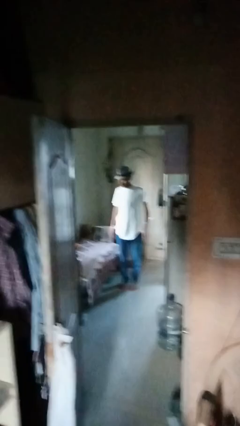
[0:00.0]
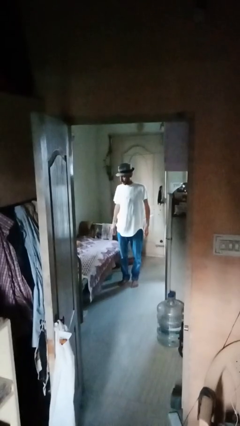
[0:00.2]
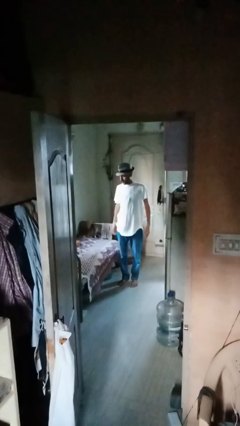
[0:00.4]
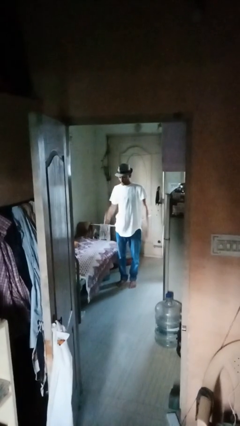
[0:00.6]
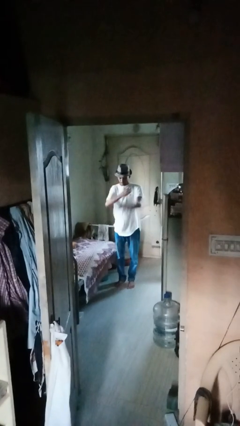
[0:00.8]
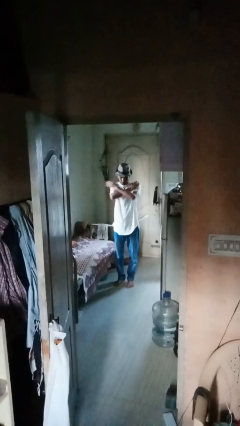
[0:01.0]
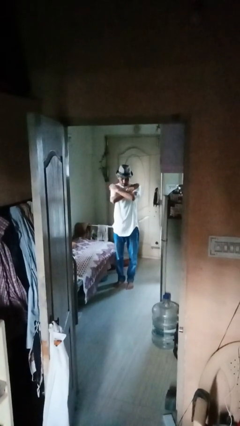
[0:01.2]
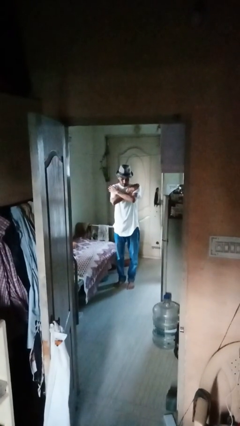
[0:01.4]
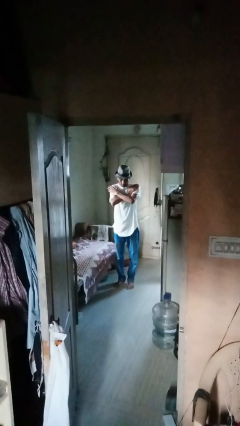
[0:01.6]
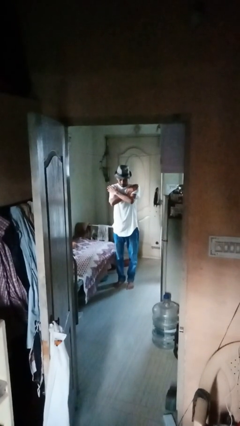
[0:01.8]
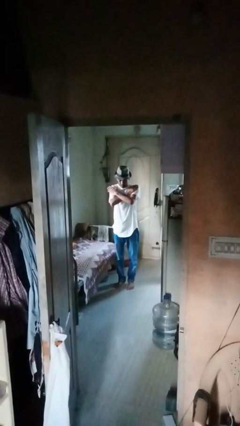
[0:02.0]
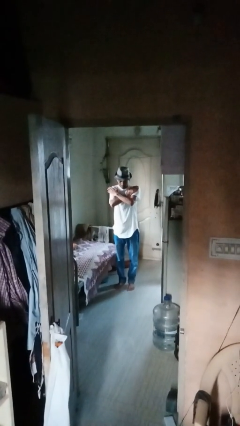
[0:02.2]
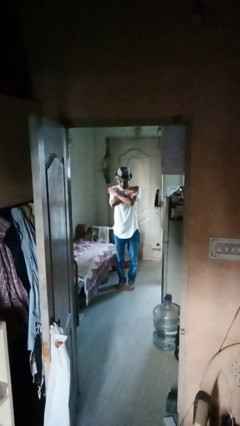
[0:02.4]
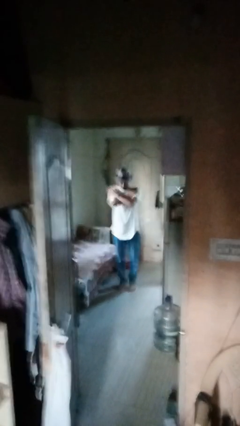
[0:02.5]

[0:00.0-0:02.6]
person gestures arms x

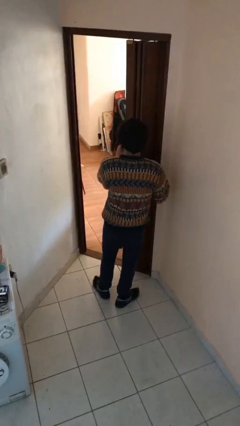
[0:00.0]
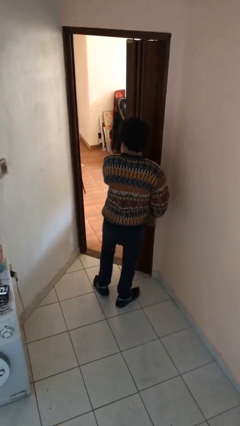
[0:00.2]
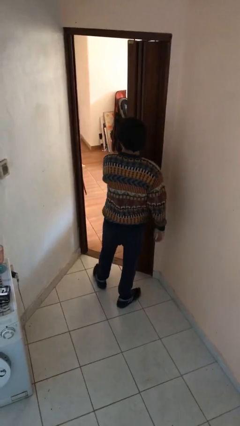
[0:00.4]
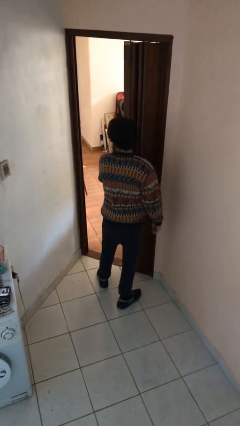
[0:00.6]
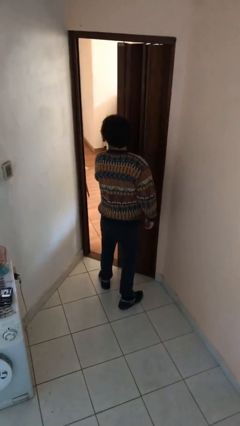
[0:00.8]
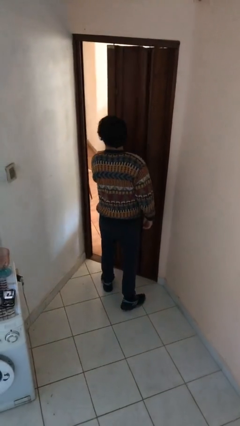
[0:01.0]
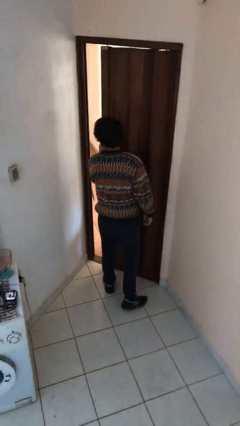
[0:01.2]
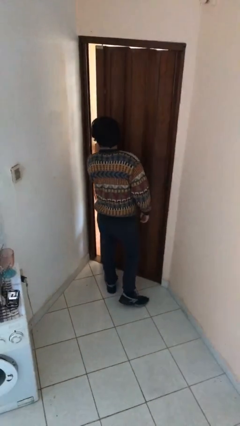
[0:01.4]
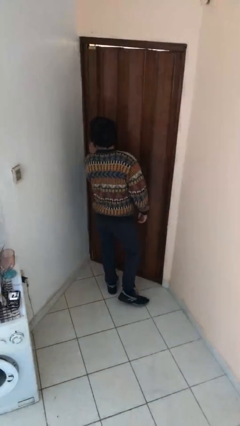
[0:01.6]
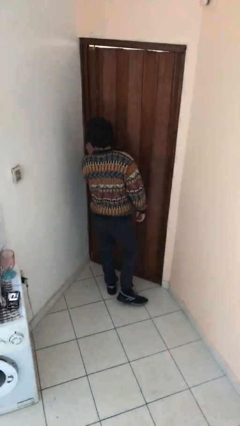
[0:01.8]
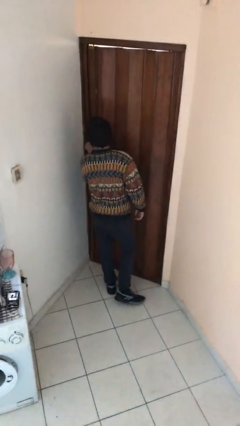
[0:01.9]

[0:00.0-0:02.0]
person closes sliding door

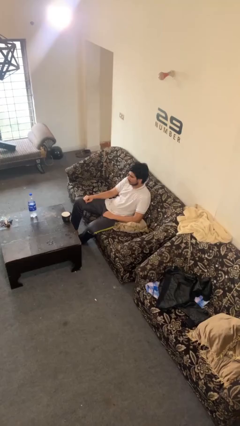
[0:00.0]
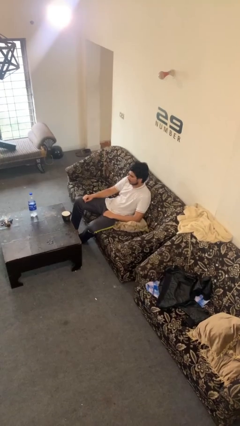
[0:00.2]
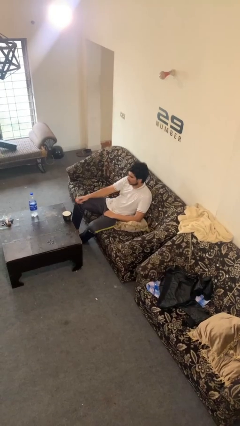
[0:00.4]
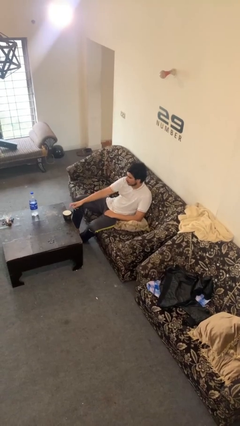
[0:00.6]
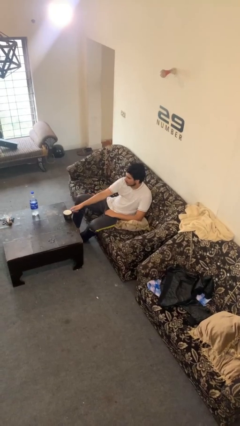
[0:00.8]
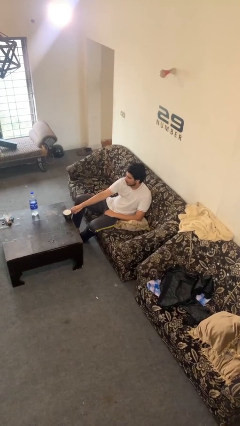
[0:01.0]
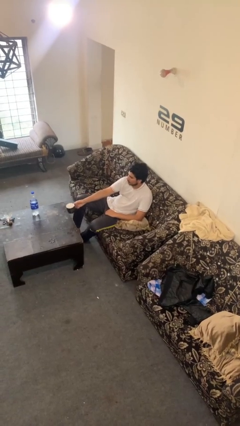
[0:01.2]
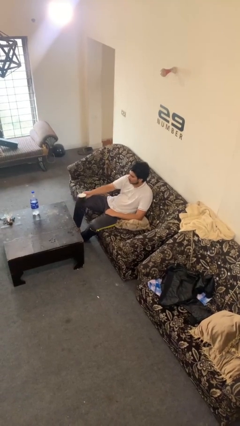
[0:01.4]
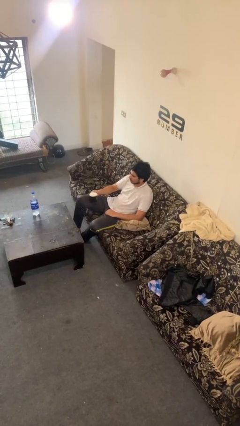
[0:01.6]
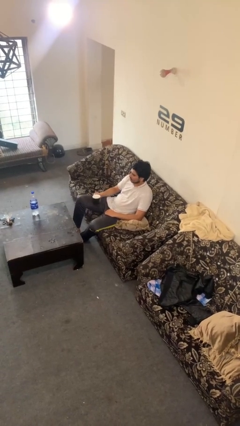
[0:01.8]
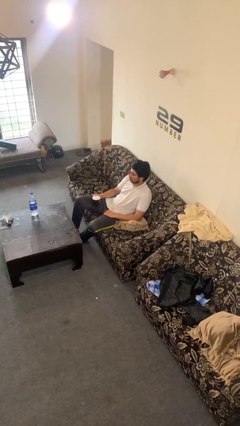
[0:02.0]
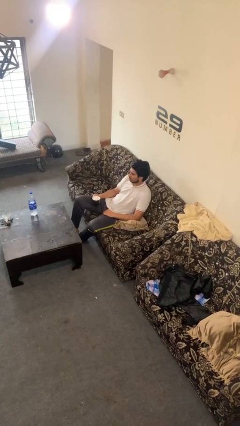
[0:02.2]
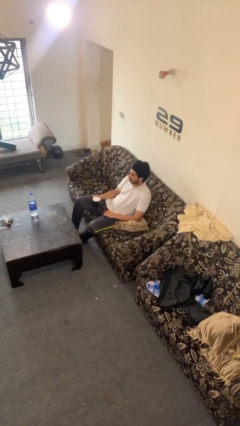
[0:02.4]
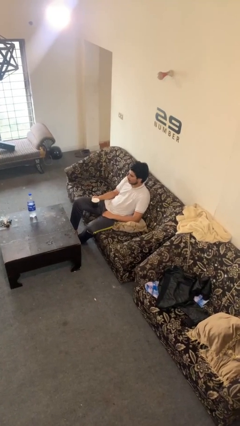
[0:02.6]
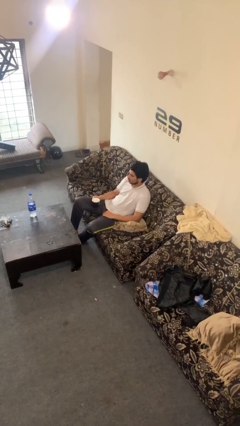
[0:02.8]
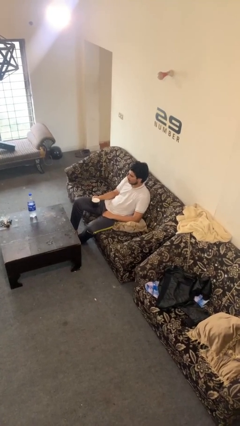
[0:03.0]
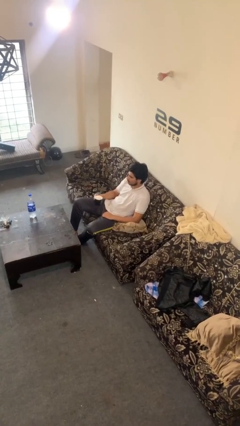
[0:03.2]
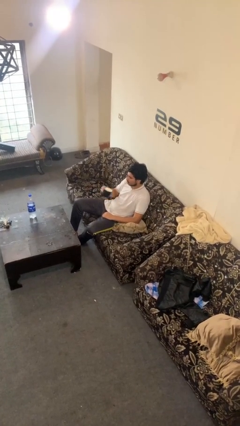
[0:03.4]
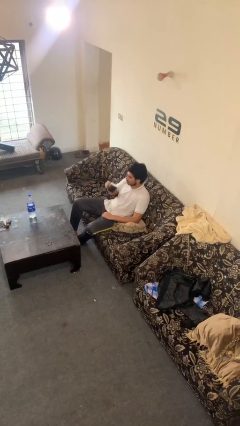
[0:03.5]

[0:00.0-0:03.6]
person picks up object from table

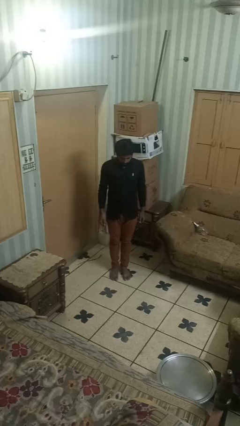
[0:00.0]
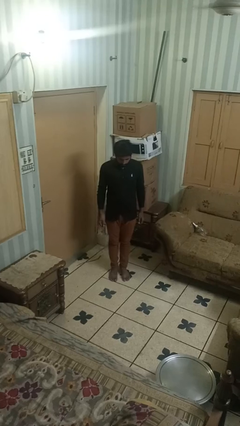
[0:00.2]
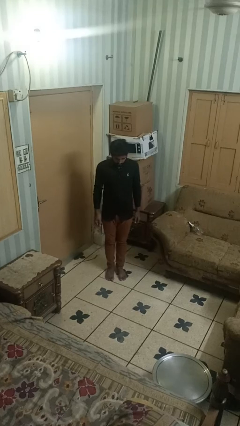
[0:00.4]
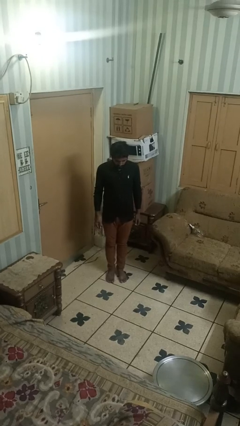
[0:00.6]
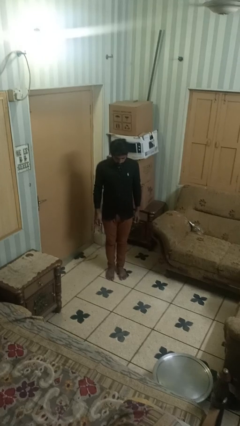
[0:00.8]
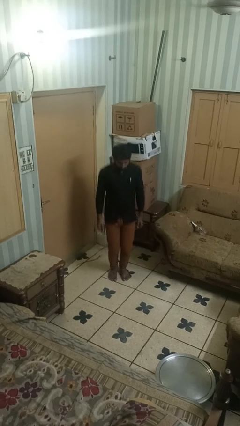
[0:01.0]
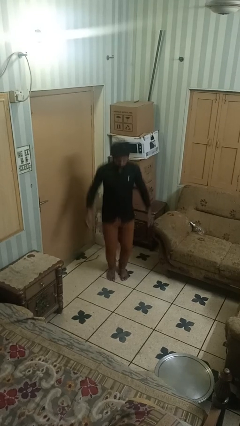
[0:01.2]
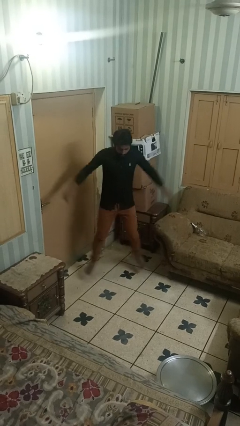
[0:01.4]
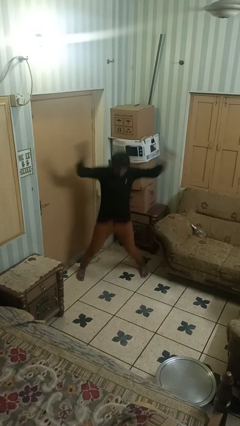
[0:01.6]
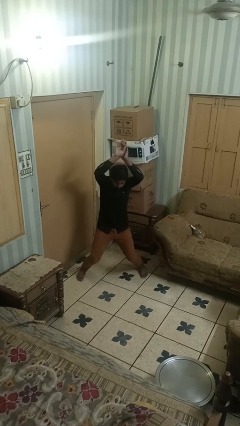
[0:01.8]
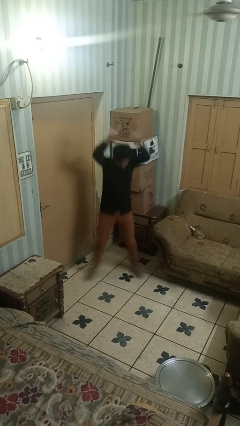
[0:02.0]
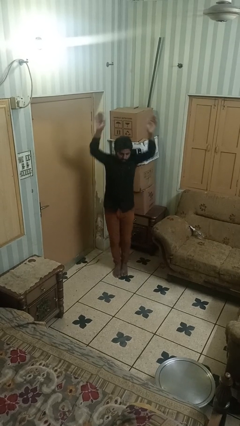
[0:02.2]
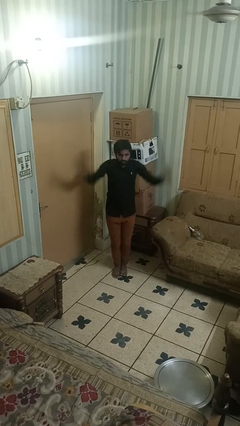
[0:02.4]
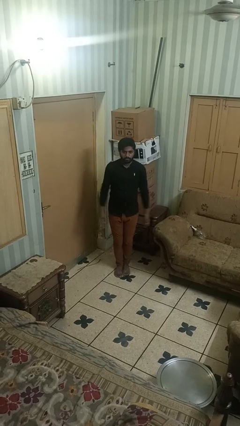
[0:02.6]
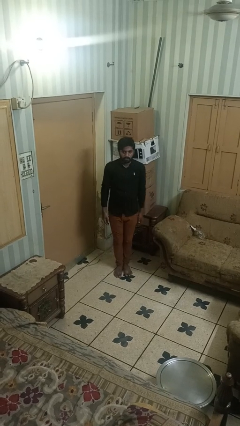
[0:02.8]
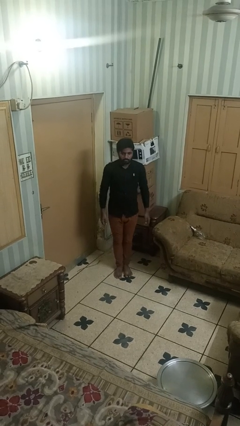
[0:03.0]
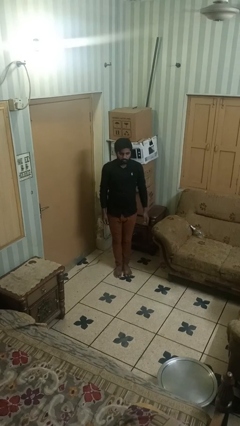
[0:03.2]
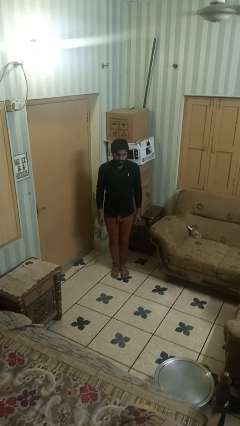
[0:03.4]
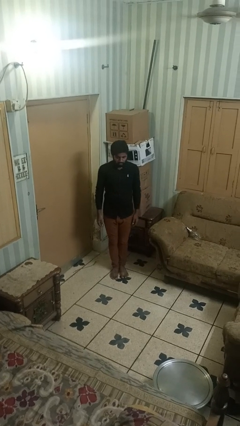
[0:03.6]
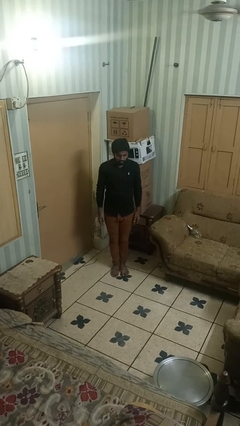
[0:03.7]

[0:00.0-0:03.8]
person exercises with jumping jacks

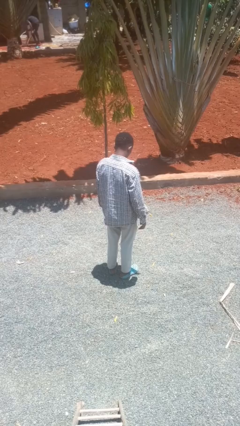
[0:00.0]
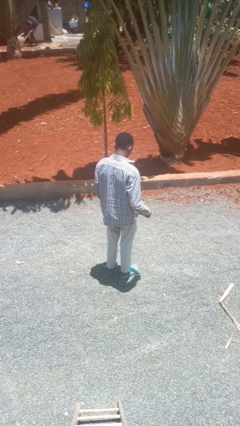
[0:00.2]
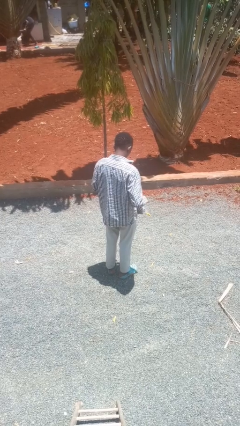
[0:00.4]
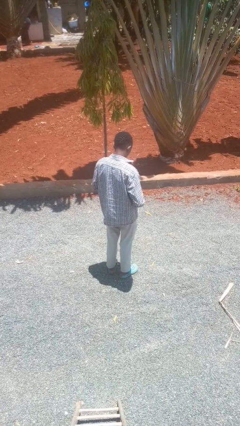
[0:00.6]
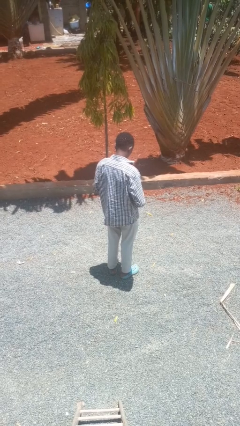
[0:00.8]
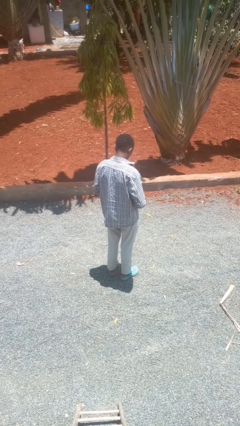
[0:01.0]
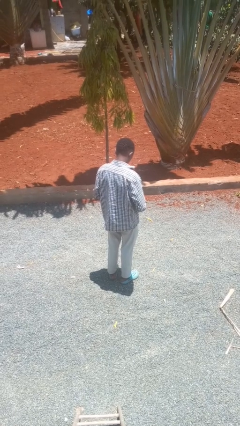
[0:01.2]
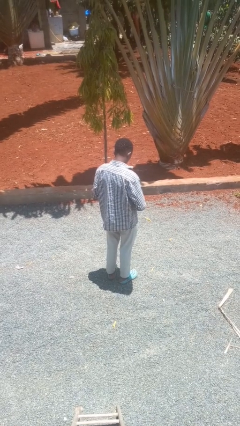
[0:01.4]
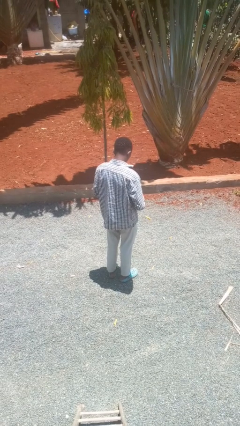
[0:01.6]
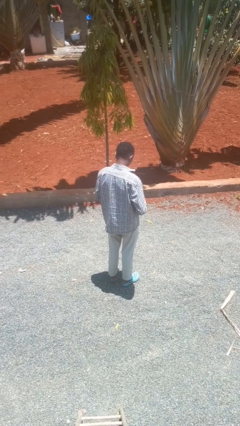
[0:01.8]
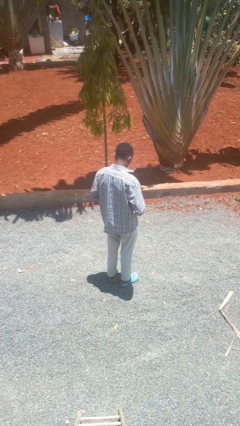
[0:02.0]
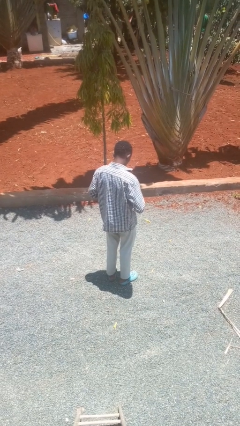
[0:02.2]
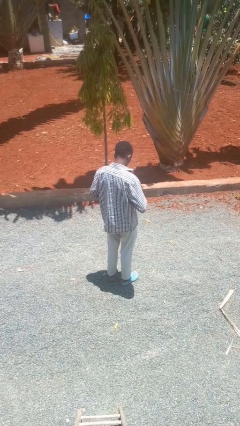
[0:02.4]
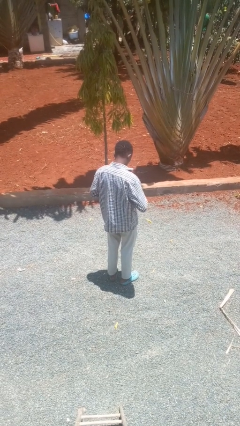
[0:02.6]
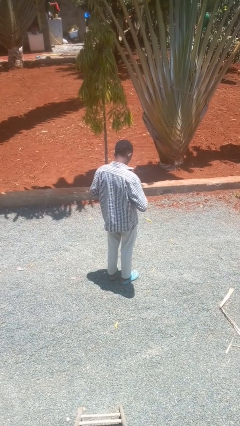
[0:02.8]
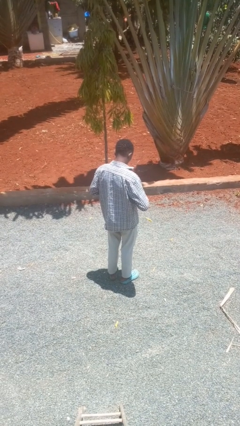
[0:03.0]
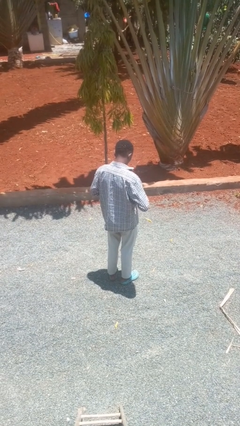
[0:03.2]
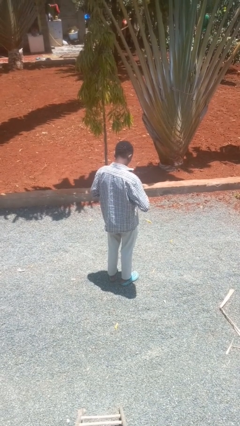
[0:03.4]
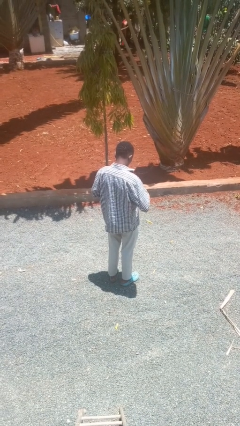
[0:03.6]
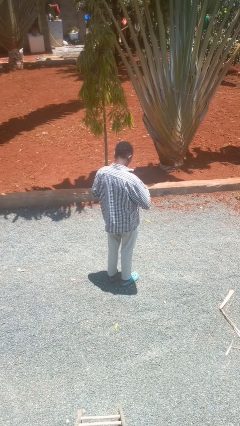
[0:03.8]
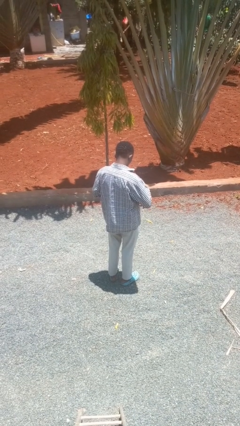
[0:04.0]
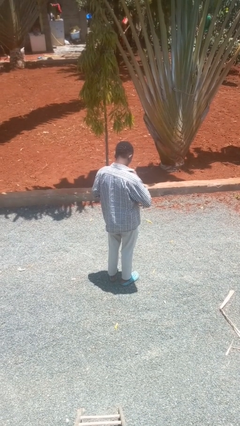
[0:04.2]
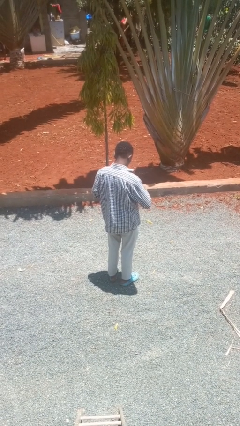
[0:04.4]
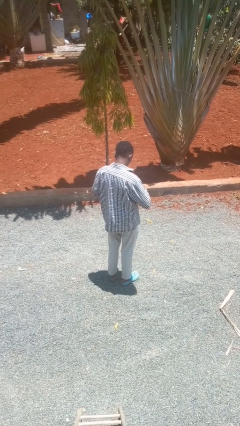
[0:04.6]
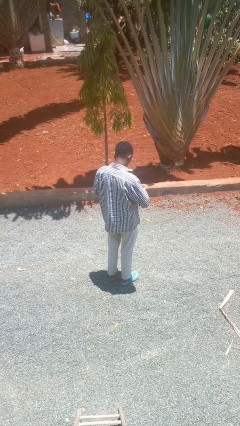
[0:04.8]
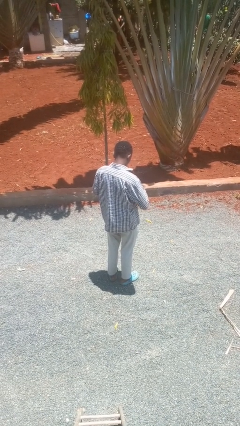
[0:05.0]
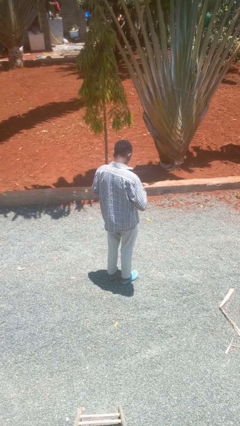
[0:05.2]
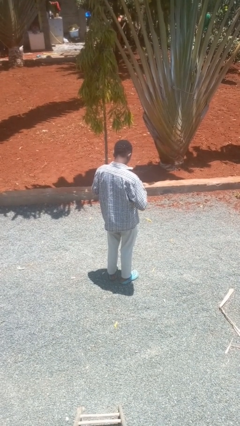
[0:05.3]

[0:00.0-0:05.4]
person buttons shirt

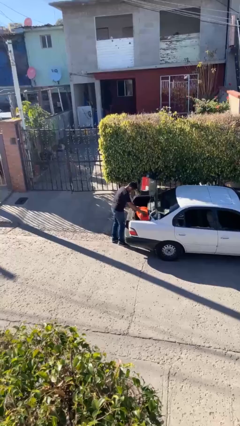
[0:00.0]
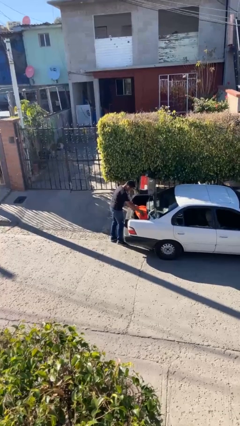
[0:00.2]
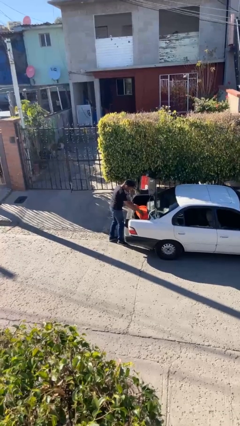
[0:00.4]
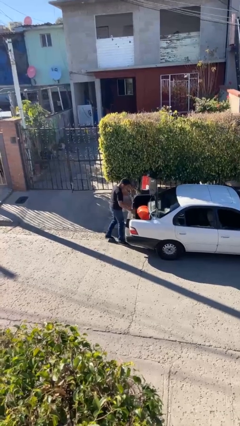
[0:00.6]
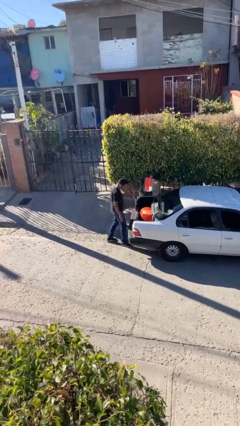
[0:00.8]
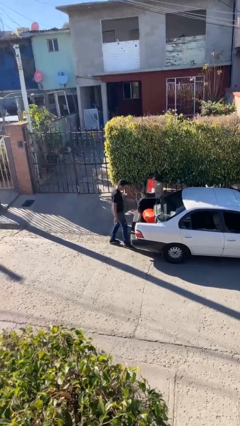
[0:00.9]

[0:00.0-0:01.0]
person loads car
